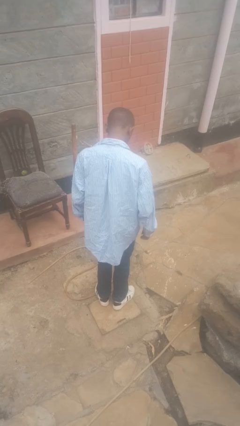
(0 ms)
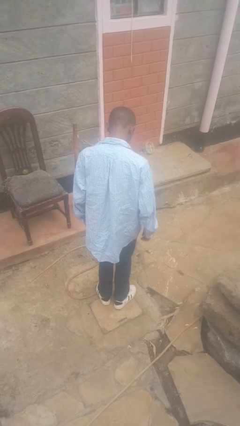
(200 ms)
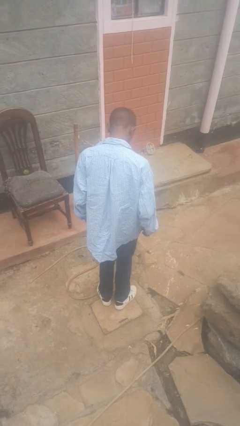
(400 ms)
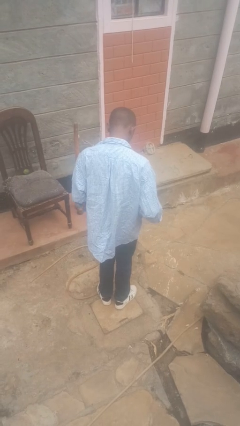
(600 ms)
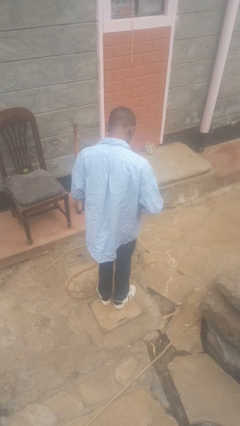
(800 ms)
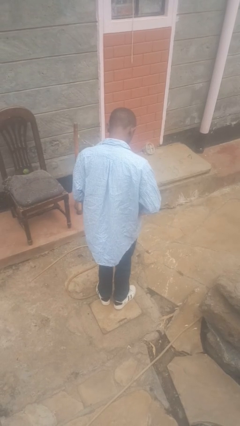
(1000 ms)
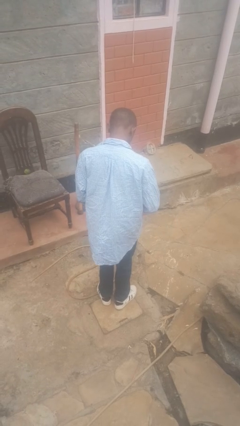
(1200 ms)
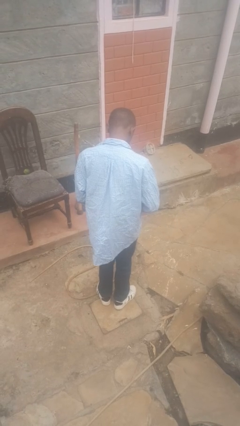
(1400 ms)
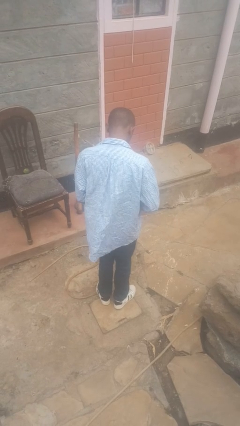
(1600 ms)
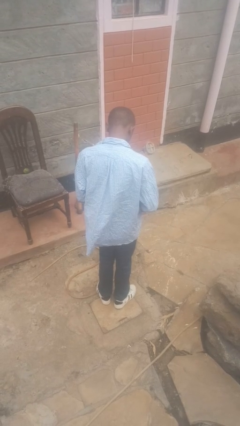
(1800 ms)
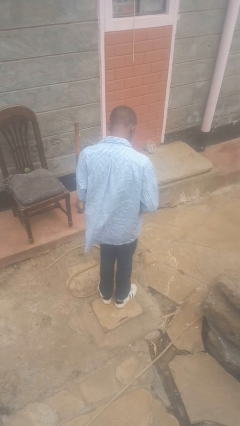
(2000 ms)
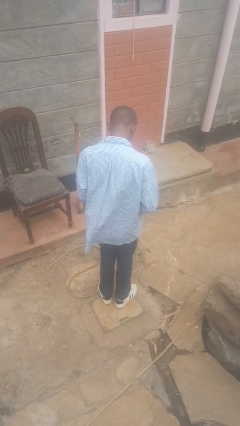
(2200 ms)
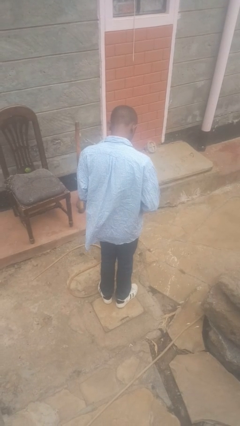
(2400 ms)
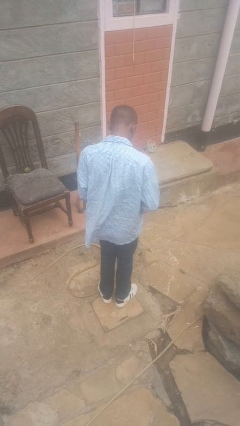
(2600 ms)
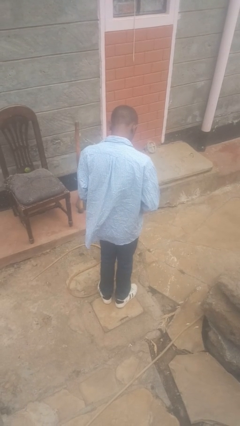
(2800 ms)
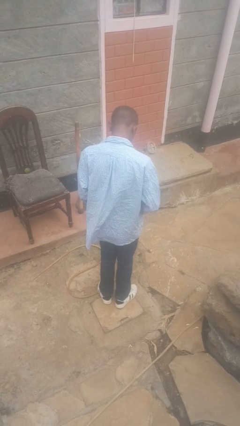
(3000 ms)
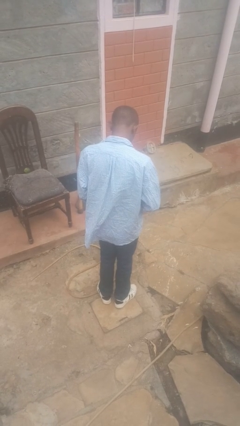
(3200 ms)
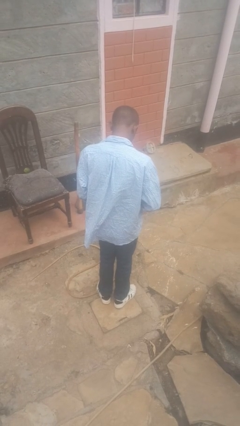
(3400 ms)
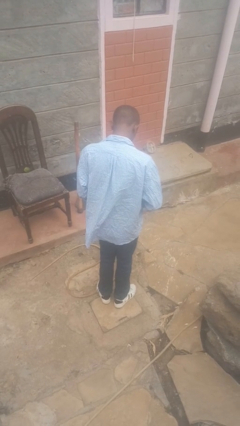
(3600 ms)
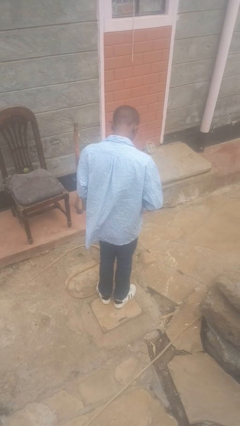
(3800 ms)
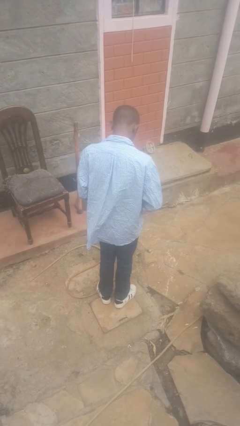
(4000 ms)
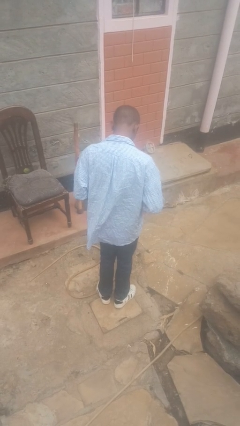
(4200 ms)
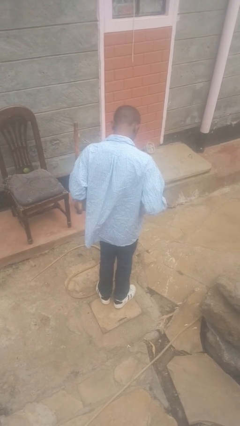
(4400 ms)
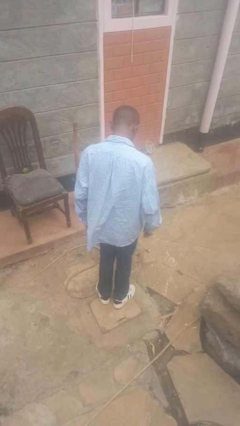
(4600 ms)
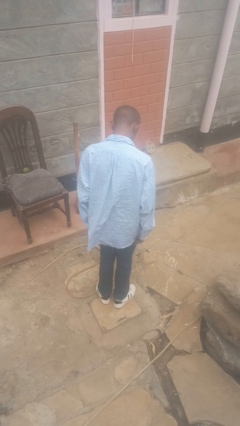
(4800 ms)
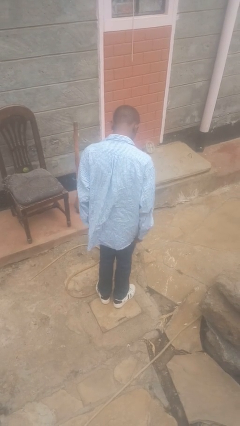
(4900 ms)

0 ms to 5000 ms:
person buttons shirt

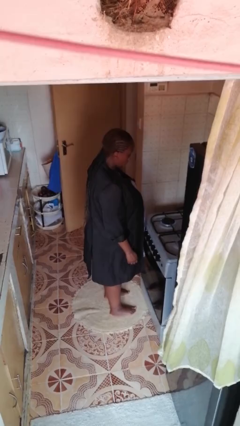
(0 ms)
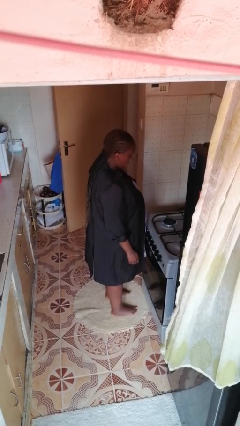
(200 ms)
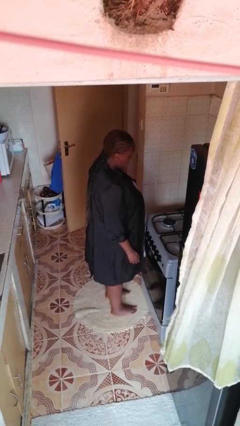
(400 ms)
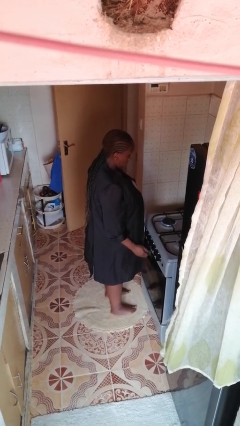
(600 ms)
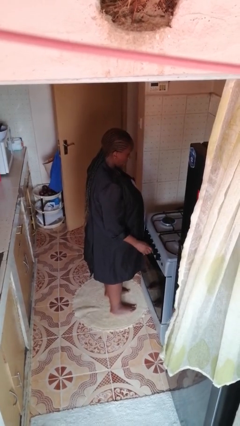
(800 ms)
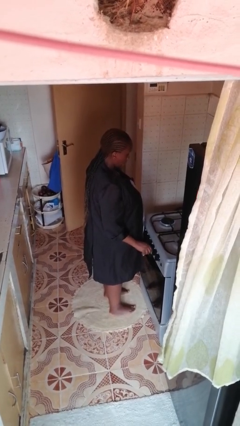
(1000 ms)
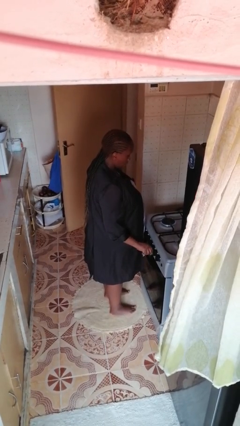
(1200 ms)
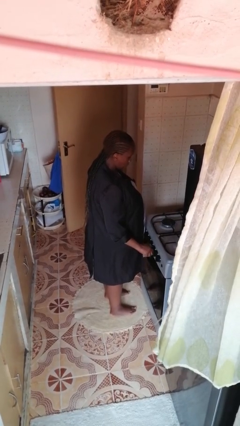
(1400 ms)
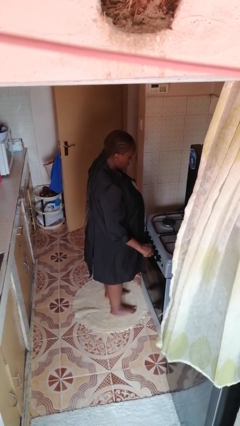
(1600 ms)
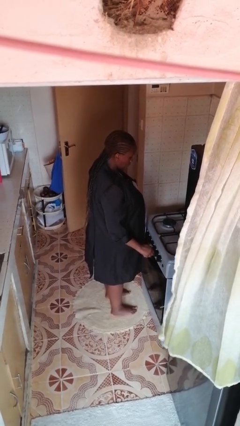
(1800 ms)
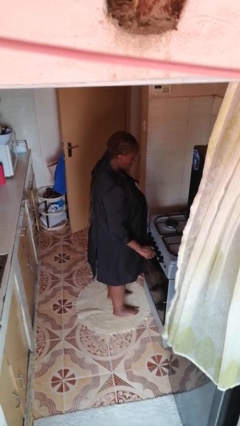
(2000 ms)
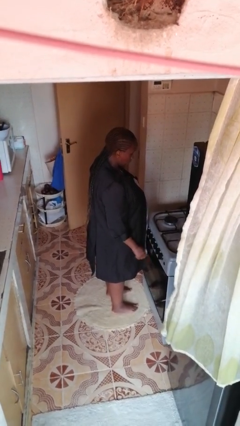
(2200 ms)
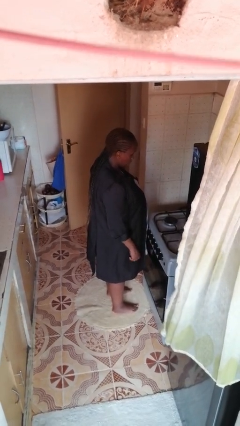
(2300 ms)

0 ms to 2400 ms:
person turns off stovetop

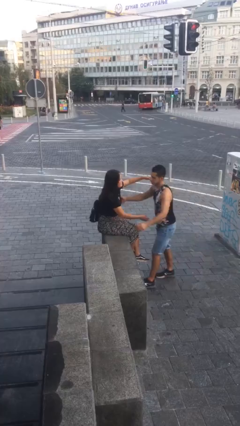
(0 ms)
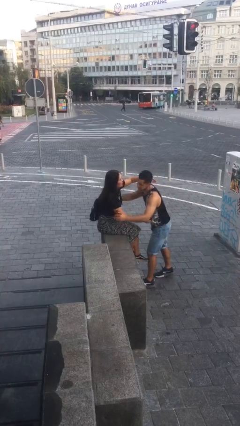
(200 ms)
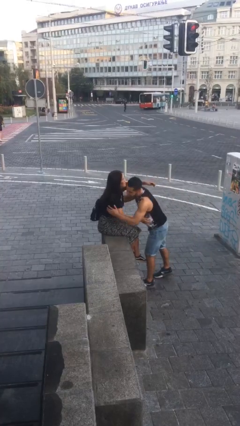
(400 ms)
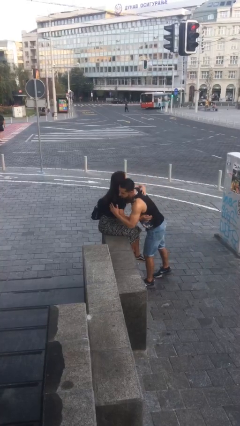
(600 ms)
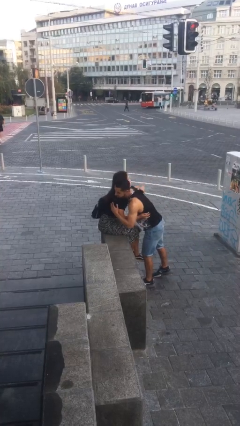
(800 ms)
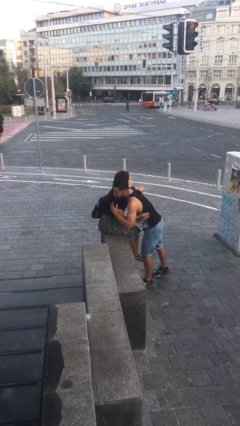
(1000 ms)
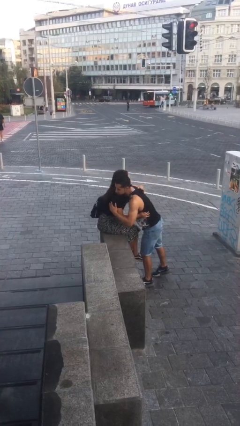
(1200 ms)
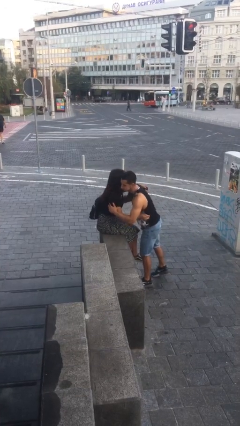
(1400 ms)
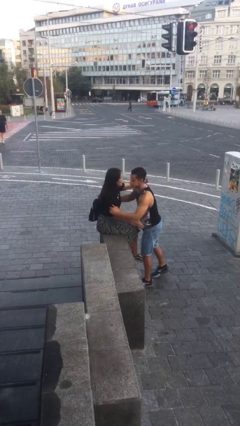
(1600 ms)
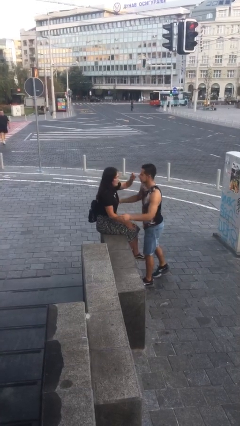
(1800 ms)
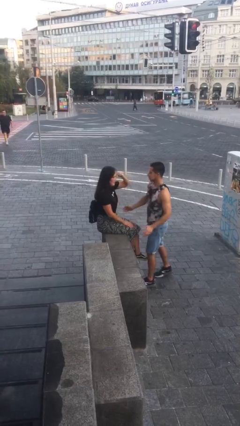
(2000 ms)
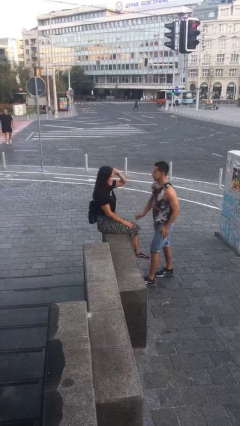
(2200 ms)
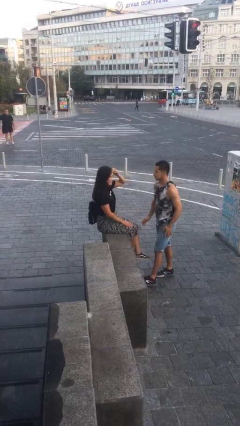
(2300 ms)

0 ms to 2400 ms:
person embraces person

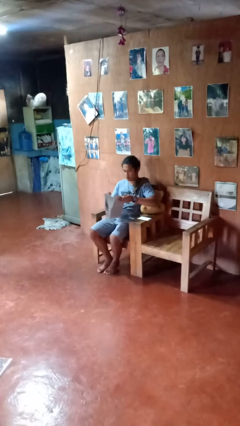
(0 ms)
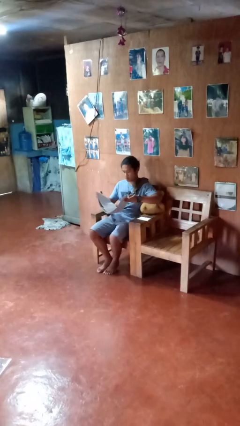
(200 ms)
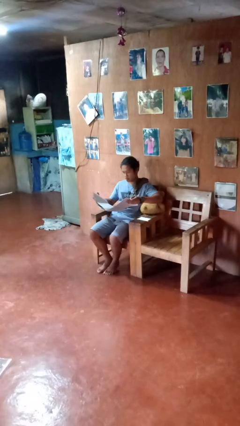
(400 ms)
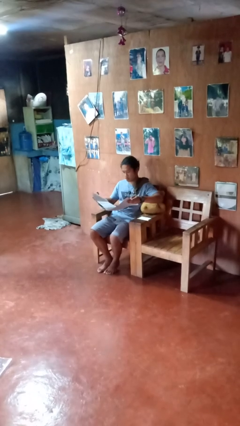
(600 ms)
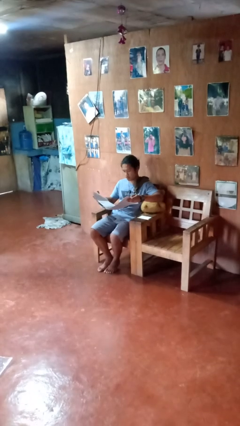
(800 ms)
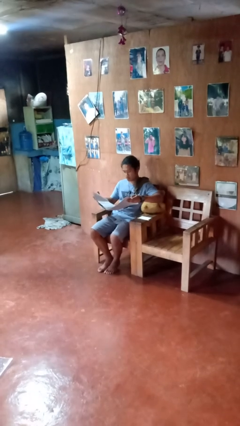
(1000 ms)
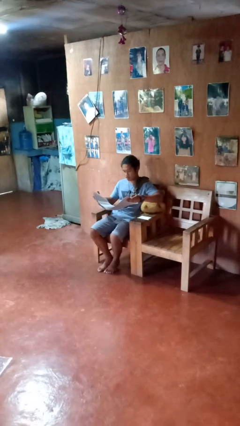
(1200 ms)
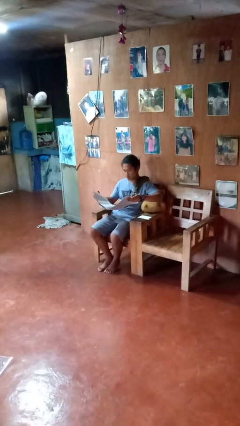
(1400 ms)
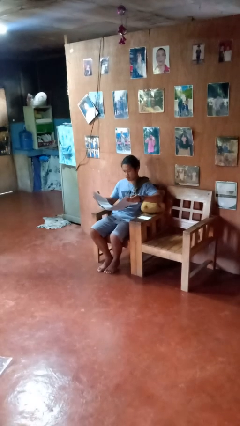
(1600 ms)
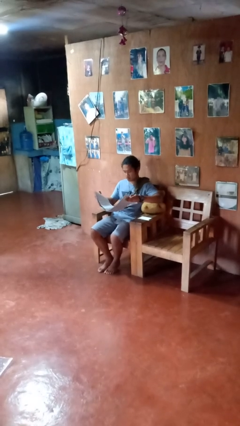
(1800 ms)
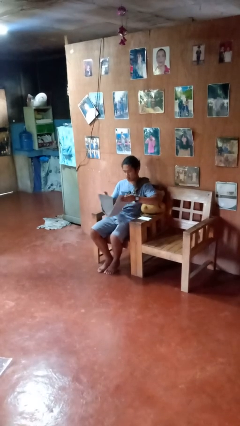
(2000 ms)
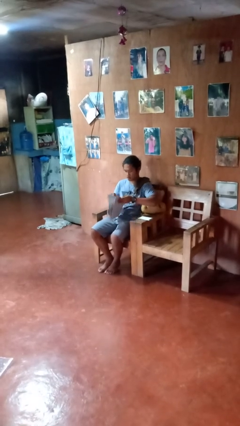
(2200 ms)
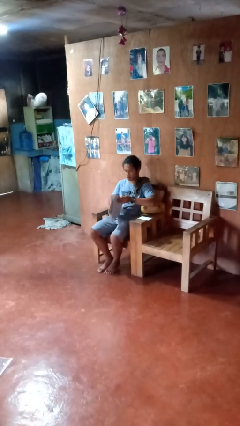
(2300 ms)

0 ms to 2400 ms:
person reads newspaper

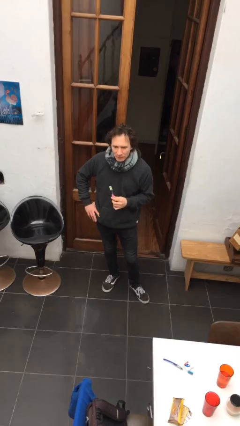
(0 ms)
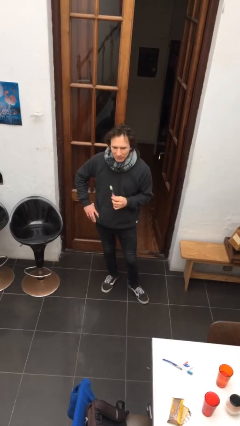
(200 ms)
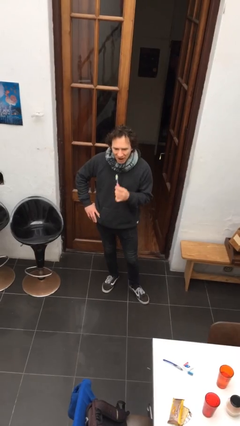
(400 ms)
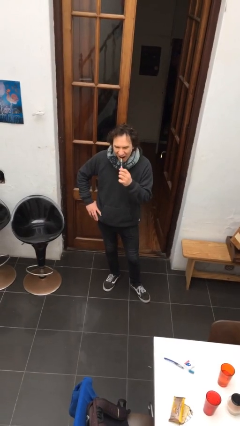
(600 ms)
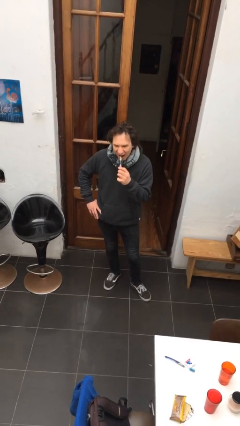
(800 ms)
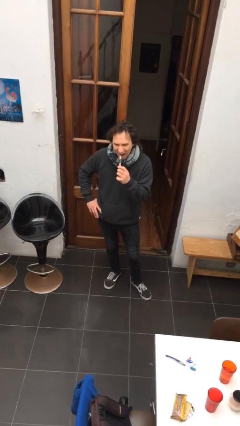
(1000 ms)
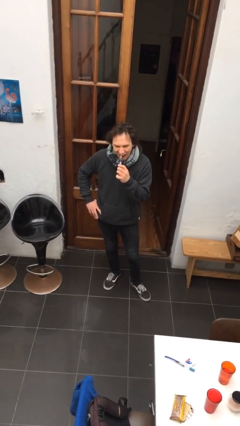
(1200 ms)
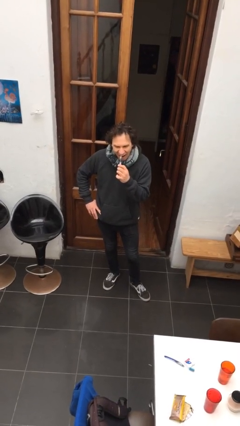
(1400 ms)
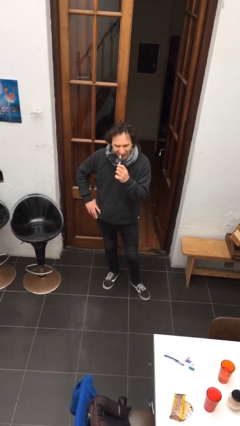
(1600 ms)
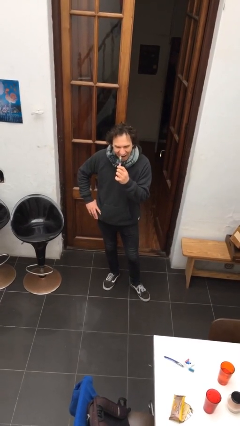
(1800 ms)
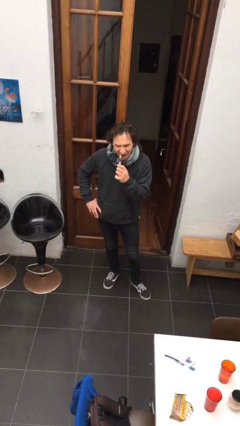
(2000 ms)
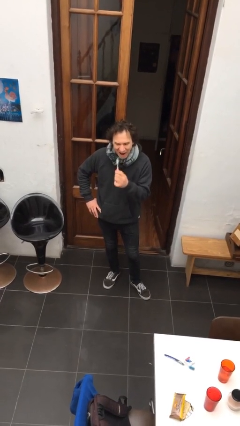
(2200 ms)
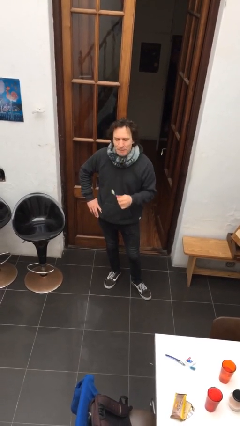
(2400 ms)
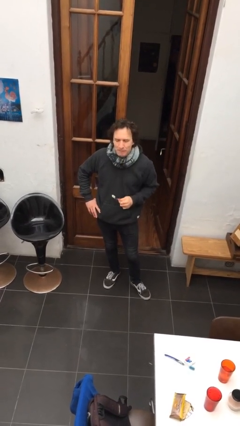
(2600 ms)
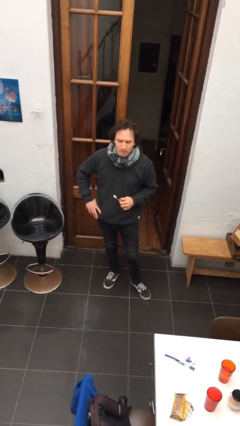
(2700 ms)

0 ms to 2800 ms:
person brushes teeth

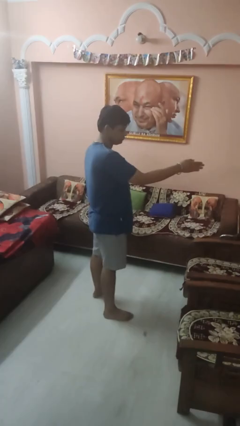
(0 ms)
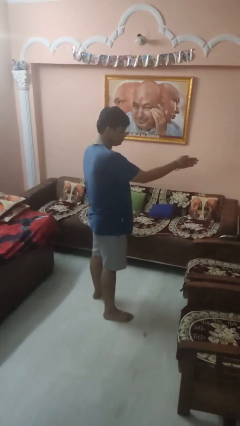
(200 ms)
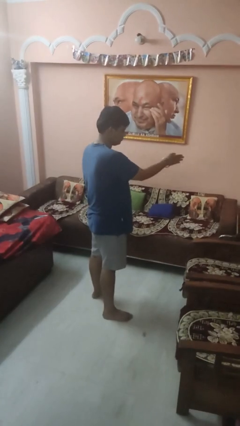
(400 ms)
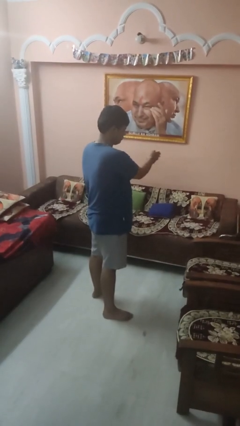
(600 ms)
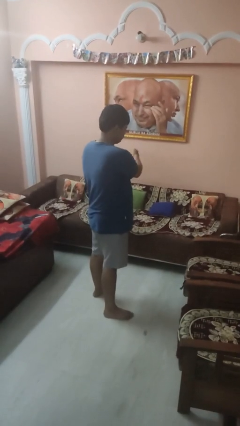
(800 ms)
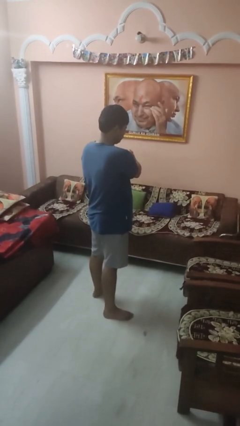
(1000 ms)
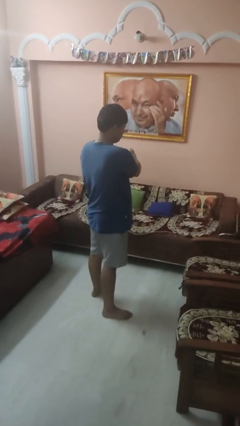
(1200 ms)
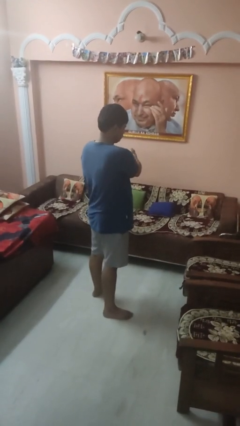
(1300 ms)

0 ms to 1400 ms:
person gestures swipe left

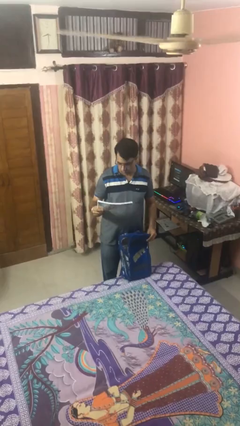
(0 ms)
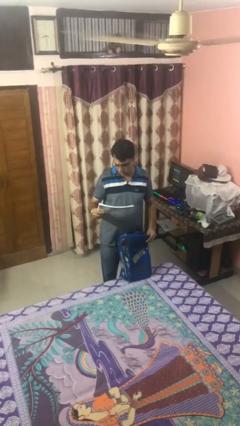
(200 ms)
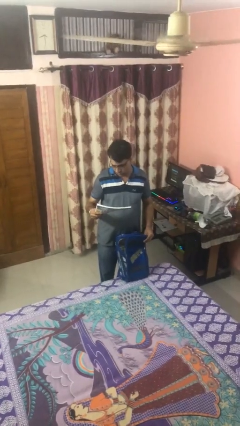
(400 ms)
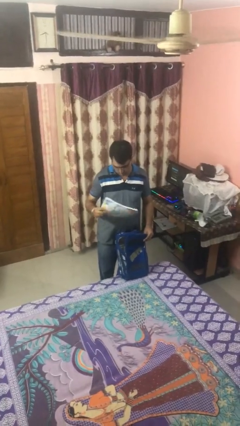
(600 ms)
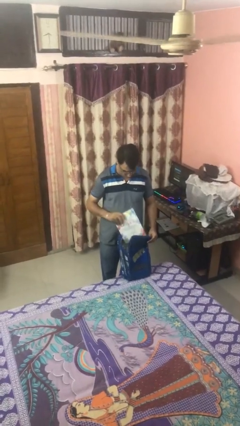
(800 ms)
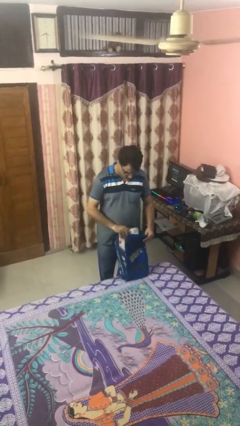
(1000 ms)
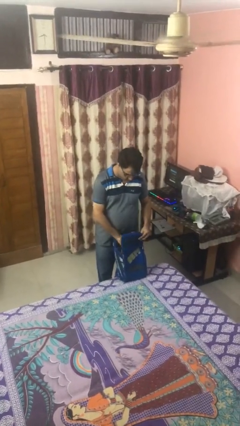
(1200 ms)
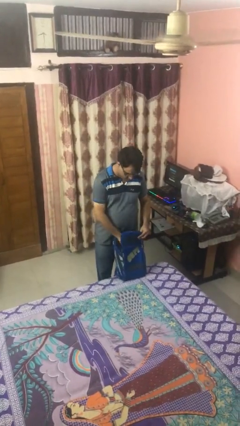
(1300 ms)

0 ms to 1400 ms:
person puts object into backpack
